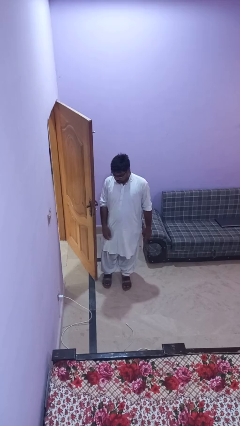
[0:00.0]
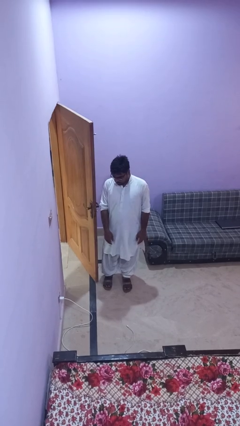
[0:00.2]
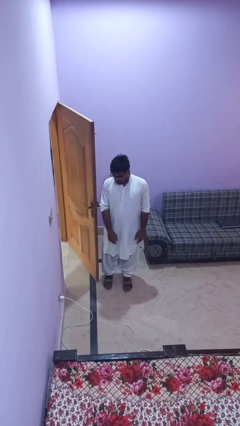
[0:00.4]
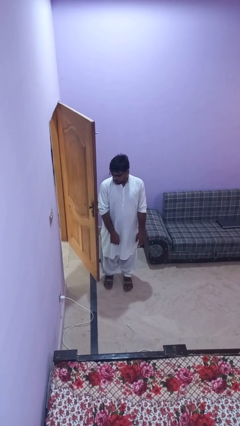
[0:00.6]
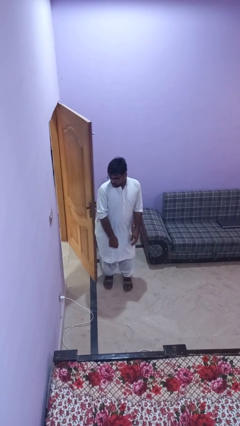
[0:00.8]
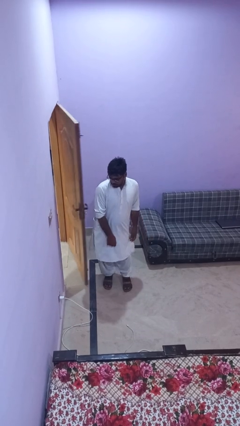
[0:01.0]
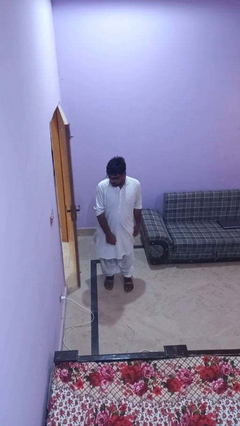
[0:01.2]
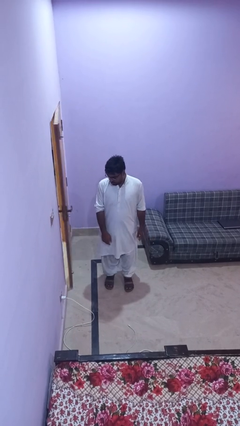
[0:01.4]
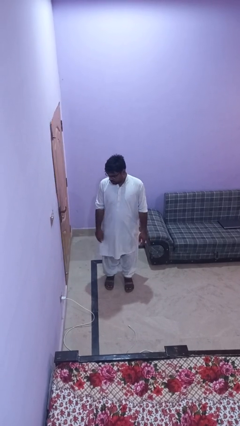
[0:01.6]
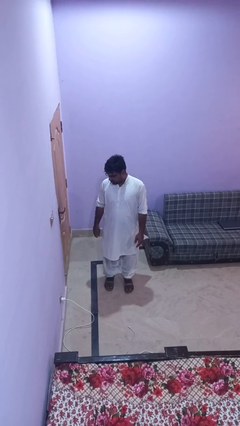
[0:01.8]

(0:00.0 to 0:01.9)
person closes door with hip

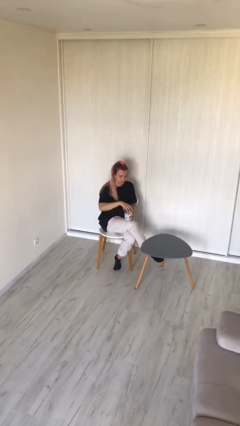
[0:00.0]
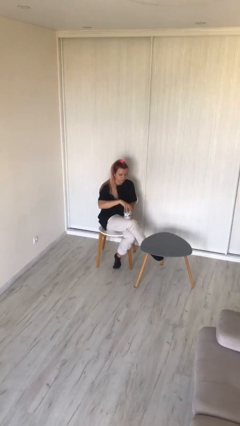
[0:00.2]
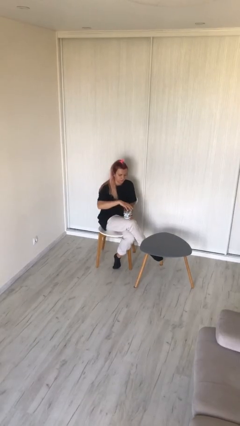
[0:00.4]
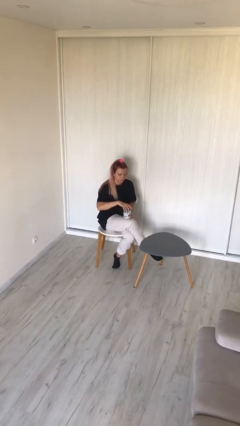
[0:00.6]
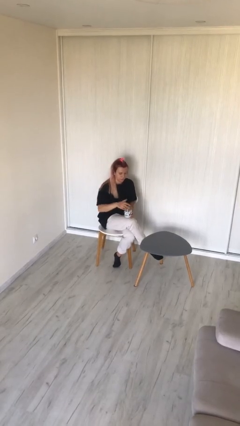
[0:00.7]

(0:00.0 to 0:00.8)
person closes jar

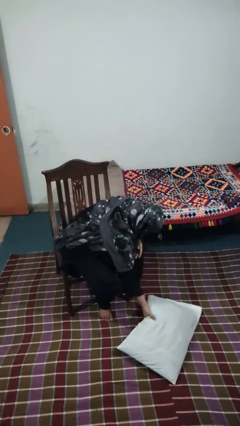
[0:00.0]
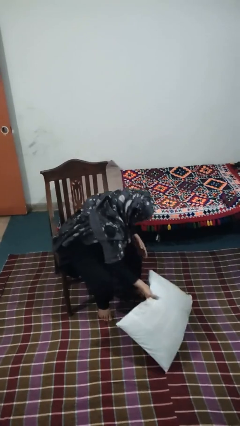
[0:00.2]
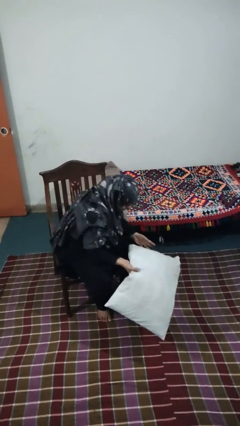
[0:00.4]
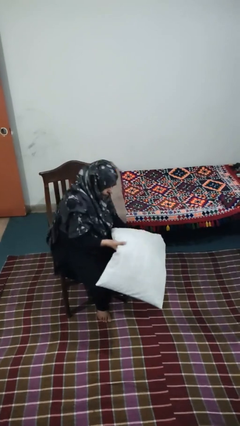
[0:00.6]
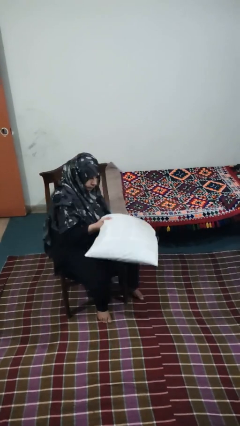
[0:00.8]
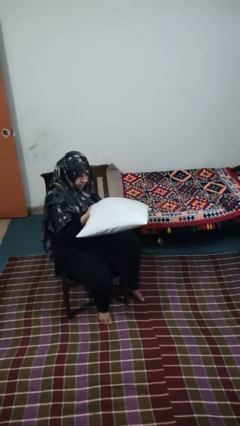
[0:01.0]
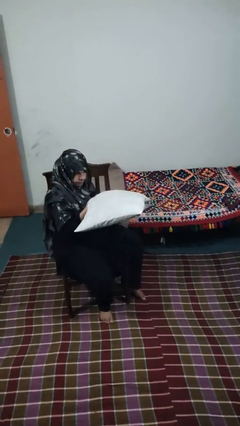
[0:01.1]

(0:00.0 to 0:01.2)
person picks up object from floor

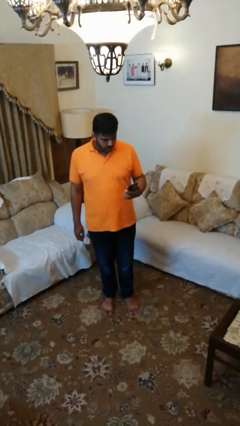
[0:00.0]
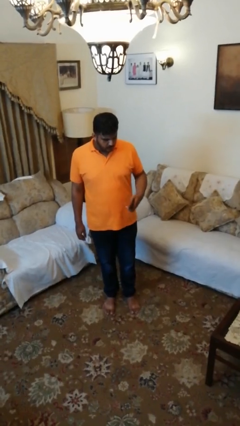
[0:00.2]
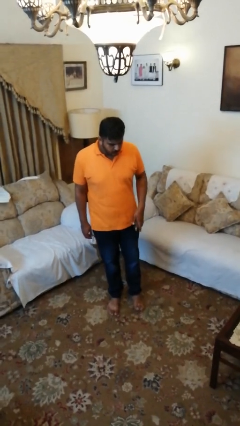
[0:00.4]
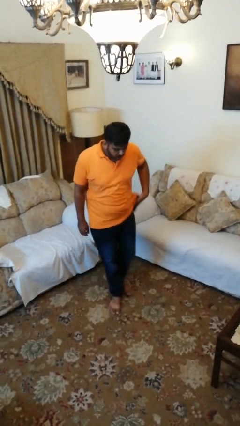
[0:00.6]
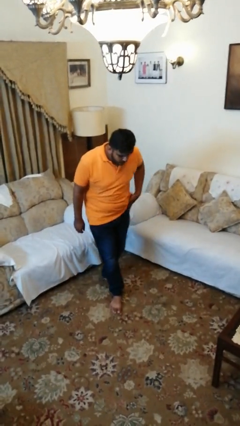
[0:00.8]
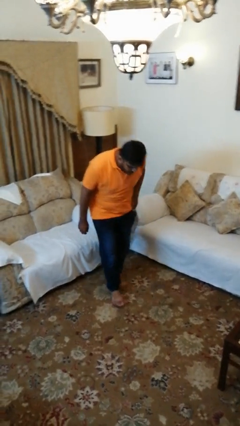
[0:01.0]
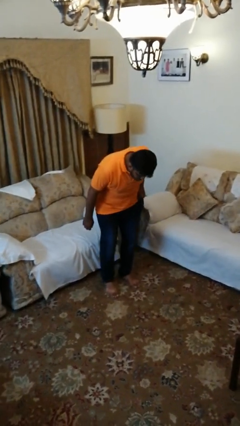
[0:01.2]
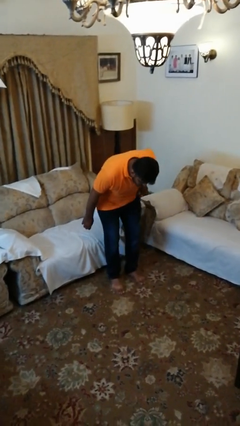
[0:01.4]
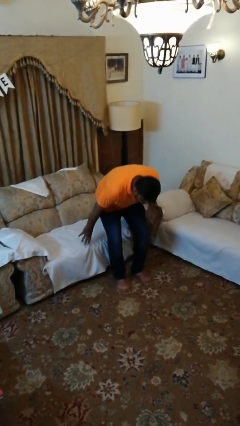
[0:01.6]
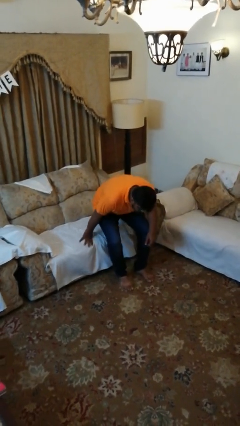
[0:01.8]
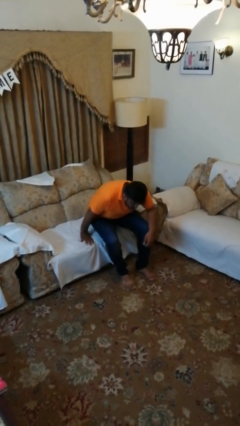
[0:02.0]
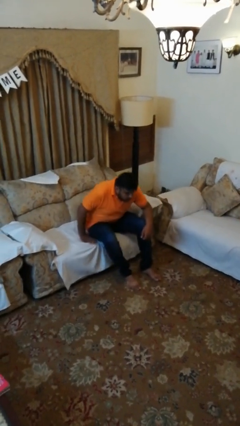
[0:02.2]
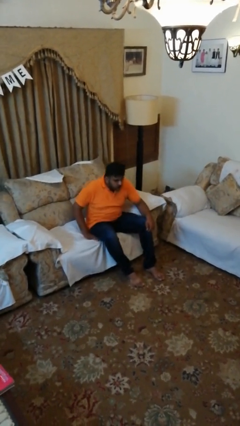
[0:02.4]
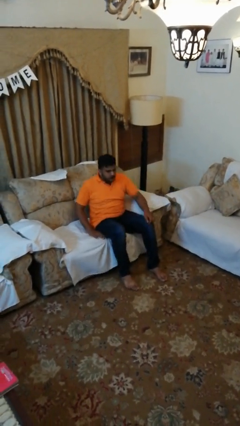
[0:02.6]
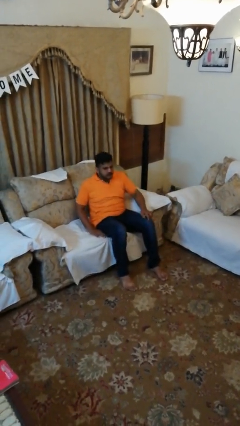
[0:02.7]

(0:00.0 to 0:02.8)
person puts phone into pocket

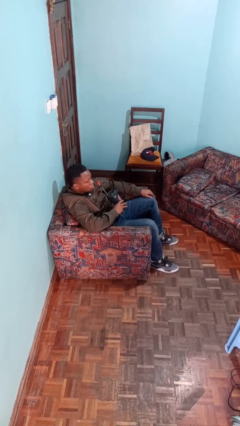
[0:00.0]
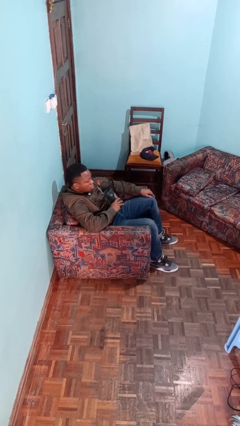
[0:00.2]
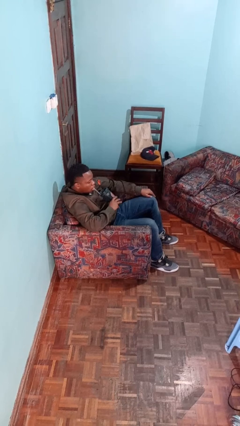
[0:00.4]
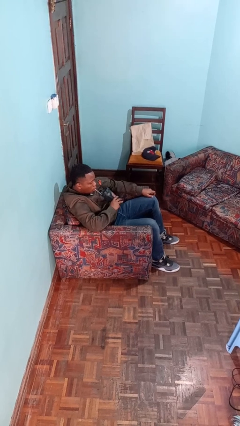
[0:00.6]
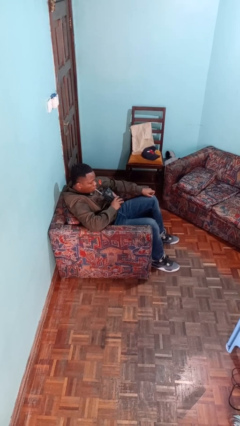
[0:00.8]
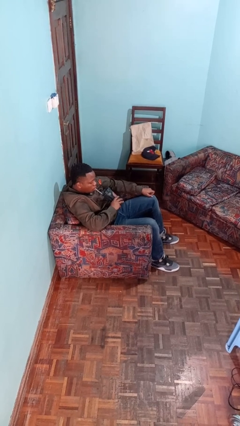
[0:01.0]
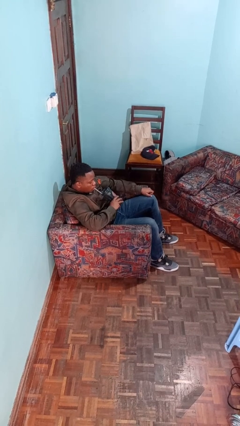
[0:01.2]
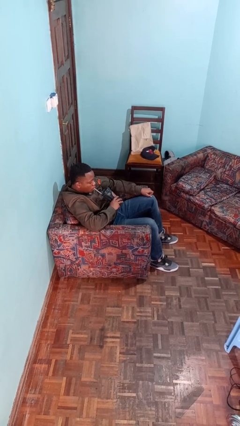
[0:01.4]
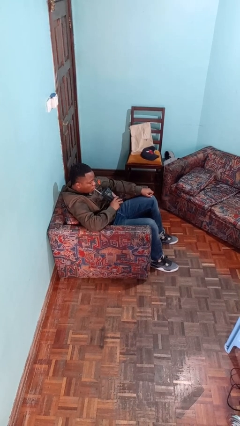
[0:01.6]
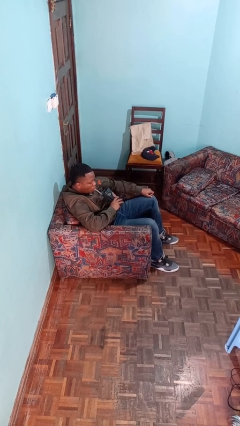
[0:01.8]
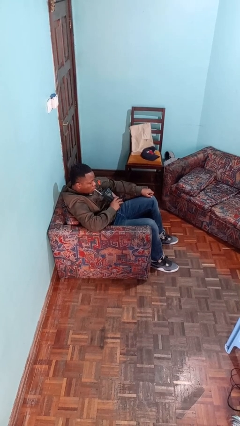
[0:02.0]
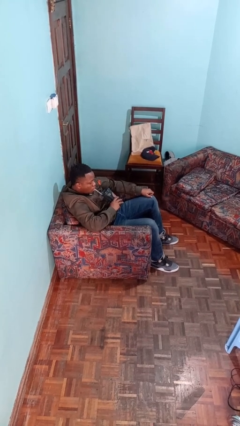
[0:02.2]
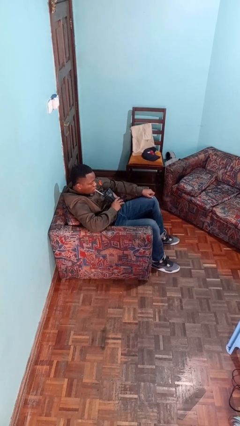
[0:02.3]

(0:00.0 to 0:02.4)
person drinks from straw

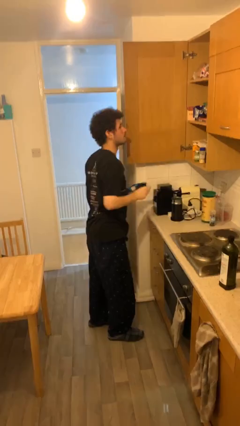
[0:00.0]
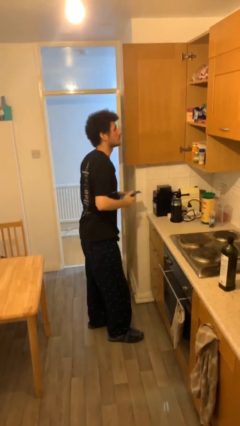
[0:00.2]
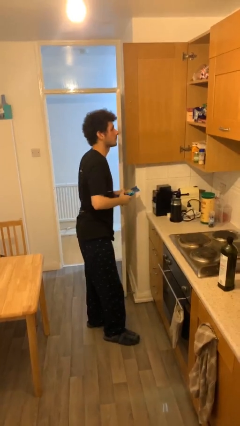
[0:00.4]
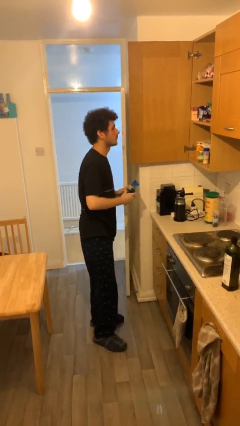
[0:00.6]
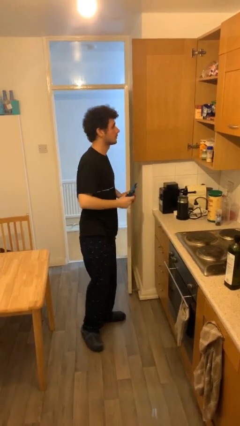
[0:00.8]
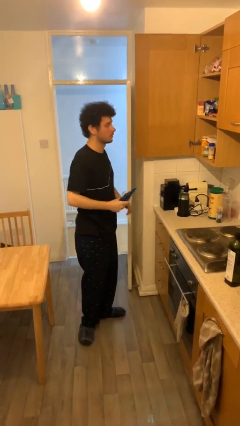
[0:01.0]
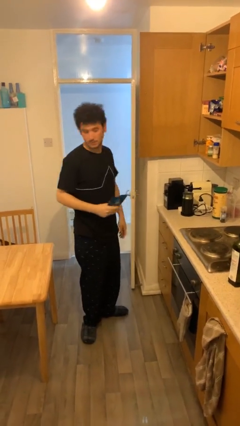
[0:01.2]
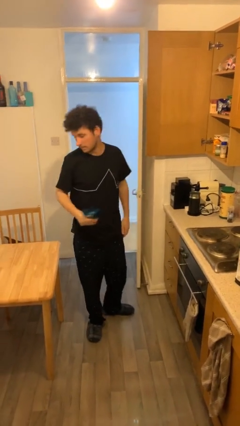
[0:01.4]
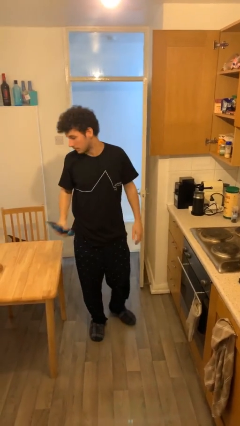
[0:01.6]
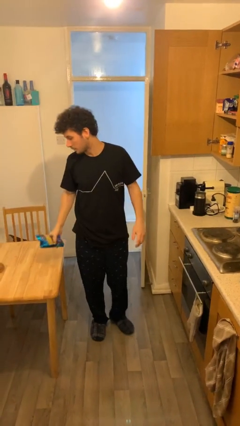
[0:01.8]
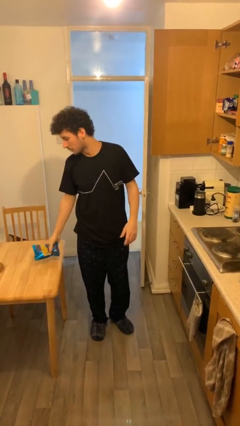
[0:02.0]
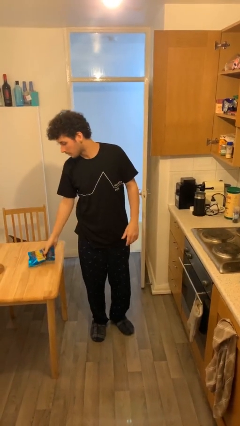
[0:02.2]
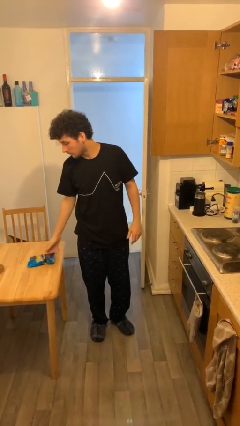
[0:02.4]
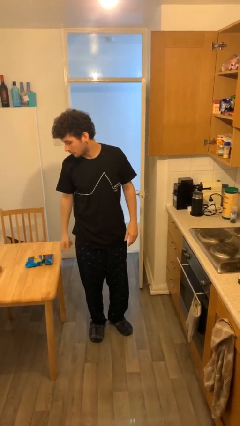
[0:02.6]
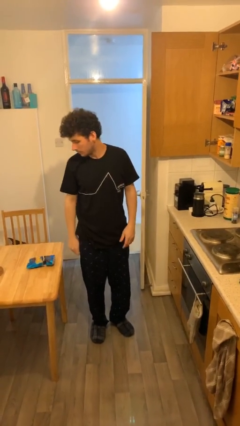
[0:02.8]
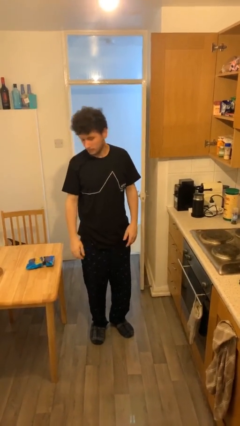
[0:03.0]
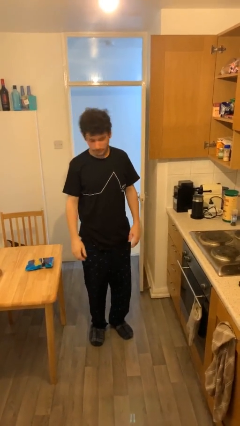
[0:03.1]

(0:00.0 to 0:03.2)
person puts down object on table

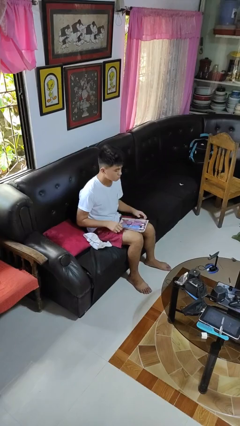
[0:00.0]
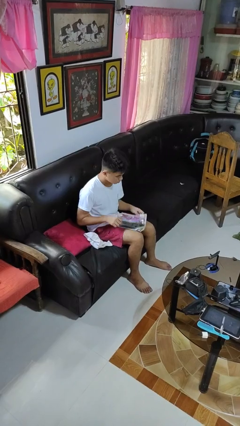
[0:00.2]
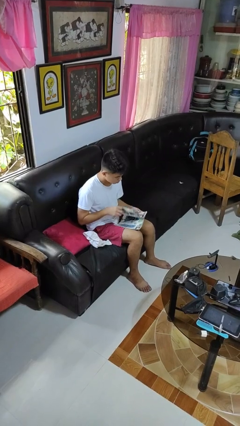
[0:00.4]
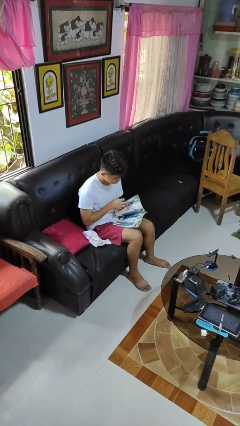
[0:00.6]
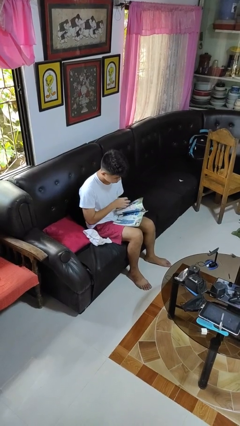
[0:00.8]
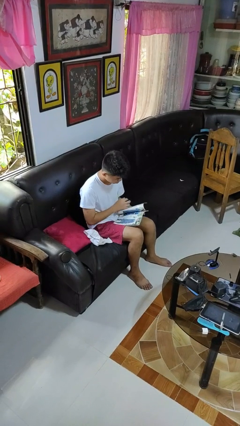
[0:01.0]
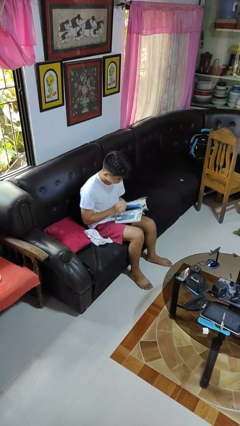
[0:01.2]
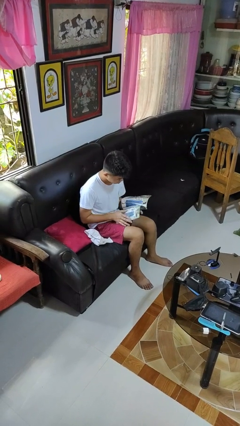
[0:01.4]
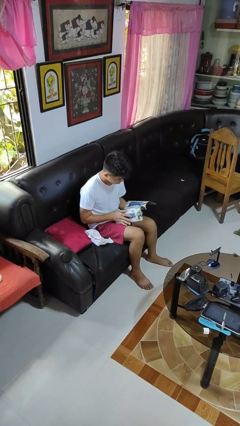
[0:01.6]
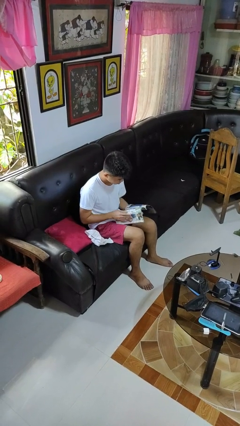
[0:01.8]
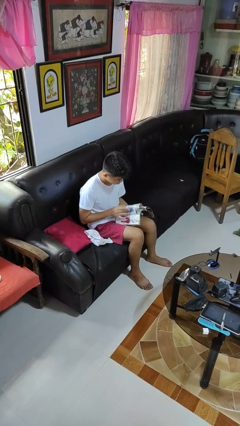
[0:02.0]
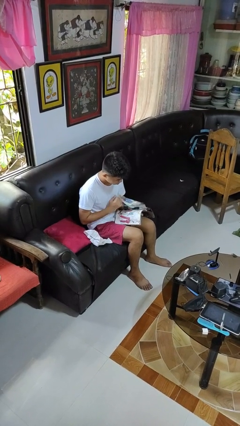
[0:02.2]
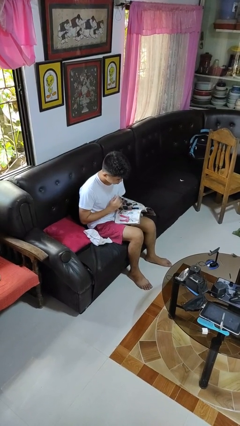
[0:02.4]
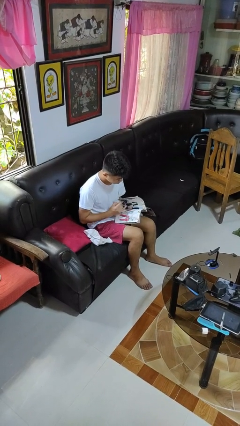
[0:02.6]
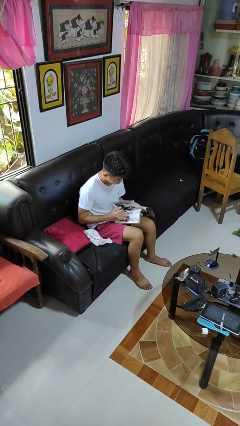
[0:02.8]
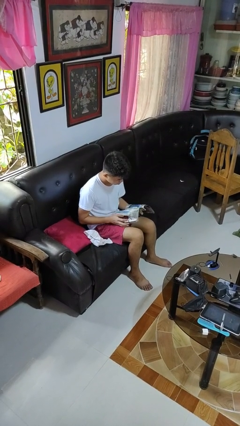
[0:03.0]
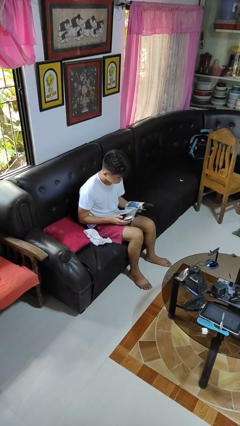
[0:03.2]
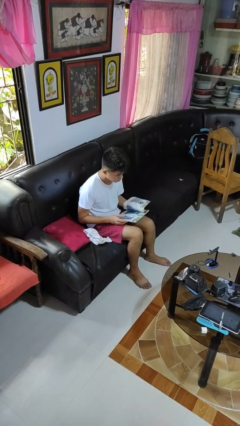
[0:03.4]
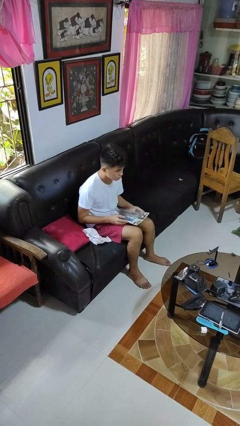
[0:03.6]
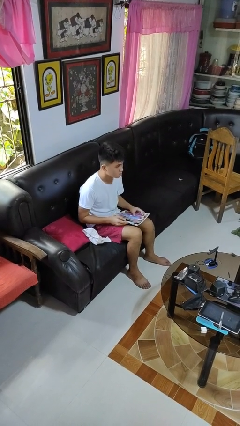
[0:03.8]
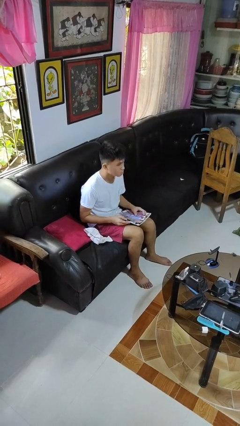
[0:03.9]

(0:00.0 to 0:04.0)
person reads magazine

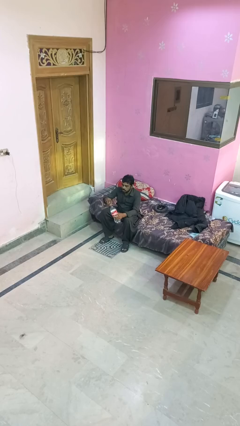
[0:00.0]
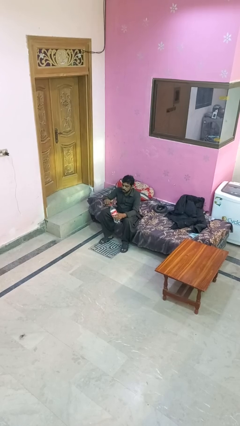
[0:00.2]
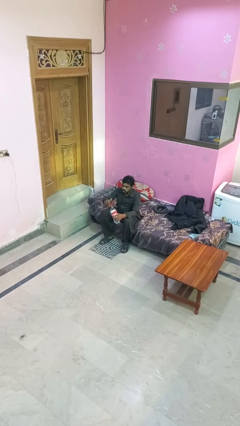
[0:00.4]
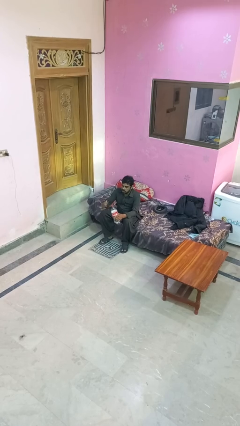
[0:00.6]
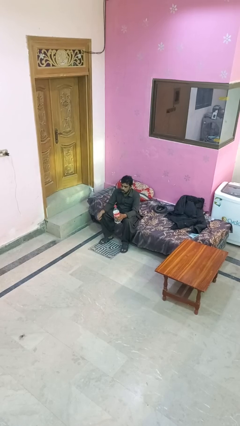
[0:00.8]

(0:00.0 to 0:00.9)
person screws lid to bottle
